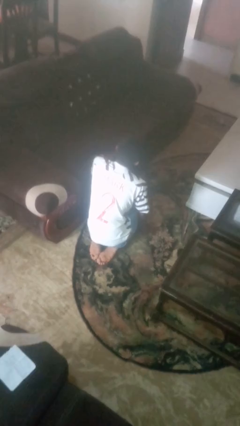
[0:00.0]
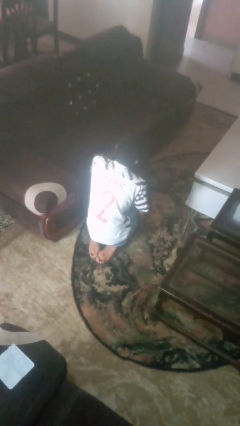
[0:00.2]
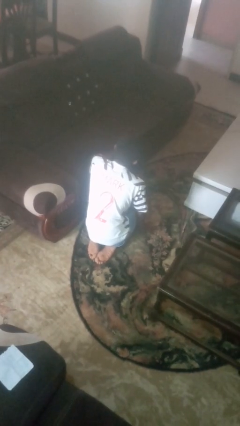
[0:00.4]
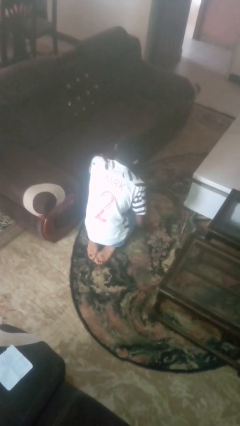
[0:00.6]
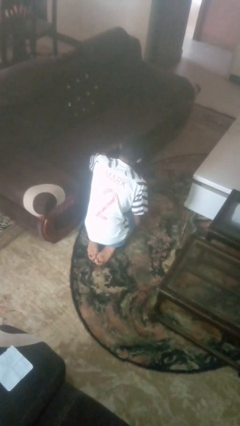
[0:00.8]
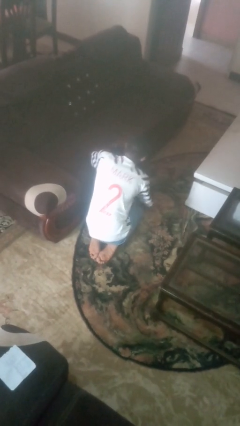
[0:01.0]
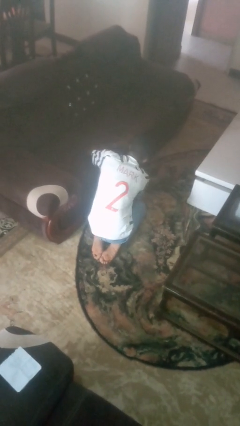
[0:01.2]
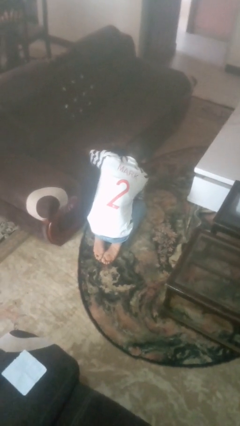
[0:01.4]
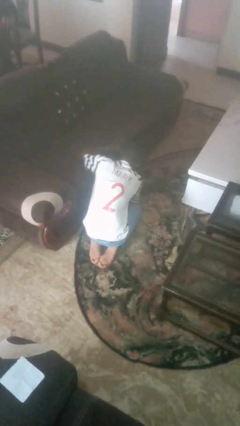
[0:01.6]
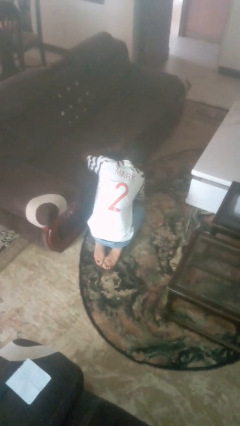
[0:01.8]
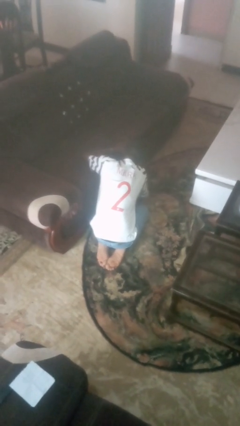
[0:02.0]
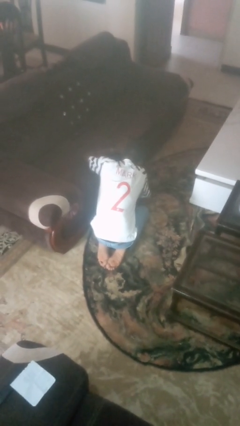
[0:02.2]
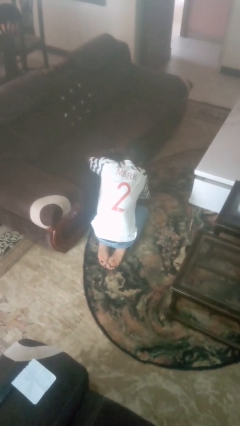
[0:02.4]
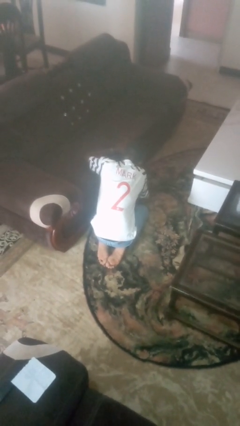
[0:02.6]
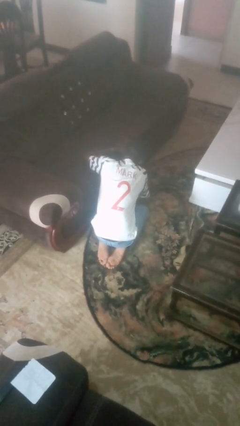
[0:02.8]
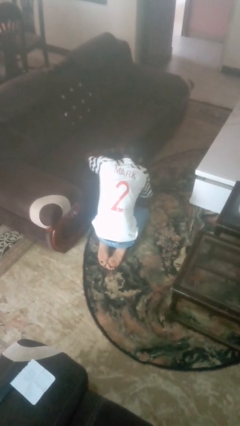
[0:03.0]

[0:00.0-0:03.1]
person searches under couch

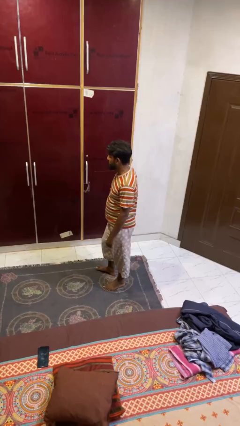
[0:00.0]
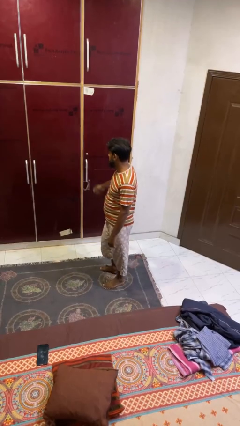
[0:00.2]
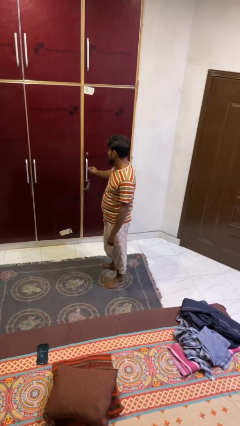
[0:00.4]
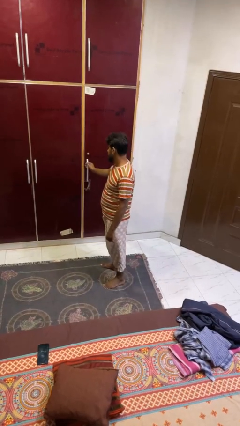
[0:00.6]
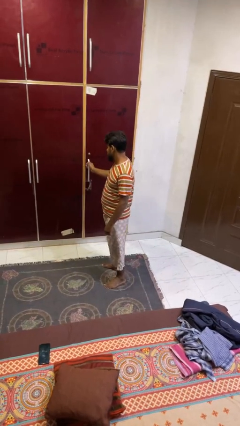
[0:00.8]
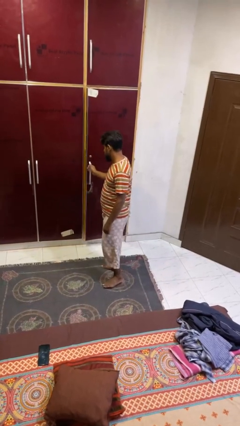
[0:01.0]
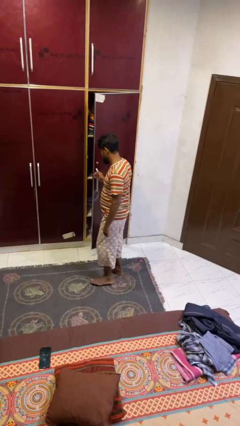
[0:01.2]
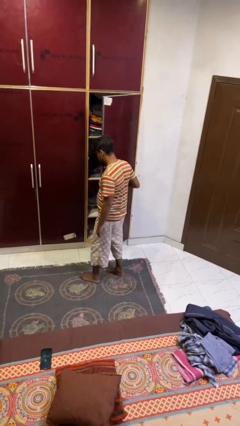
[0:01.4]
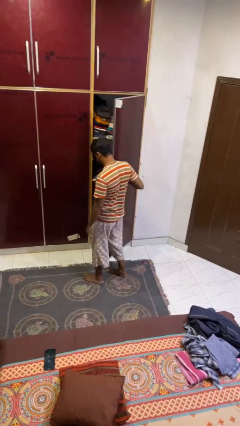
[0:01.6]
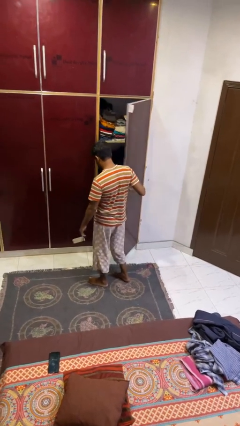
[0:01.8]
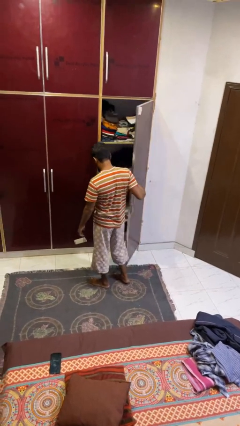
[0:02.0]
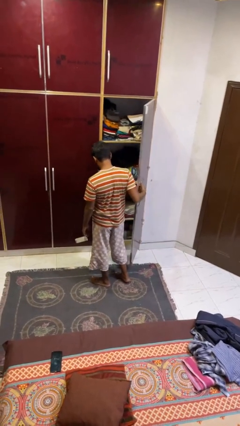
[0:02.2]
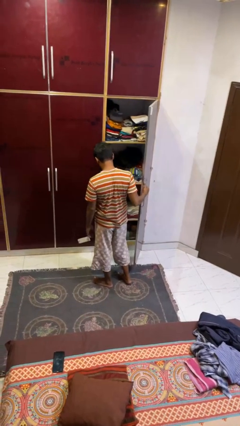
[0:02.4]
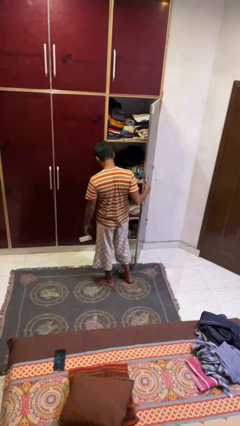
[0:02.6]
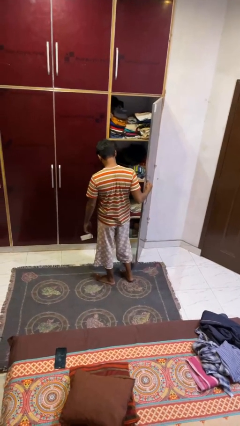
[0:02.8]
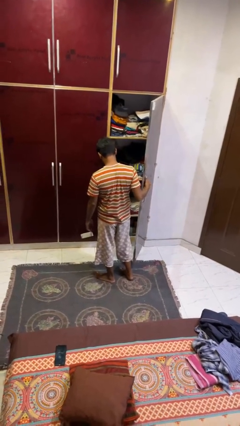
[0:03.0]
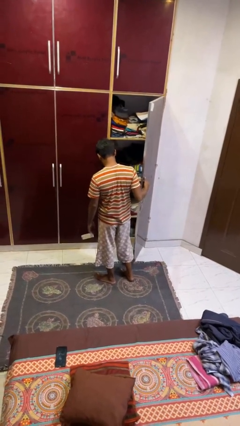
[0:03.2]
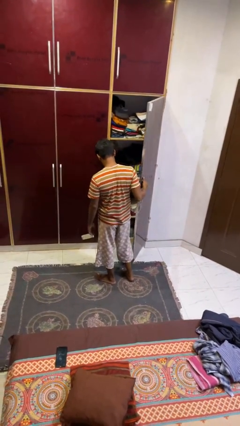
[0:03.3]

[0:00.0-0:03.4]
person opens closet door

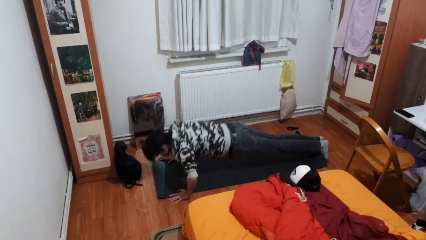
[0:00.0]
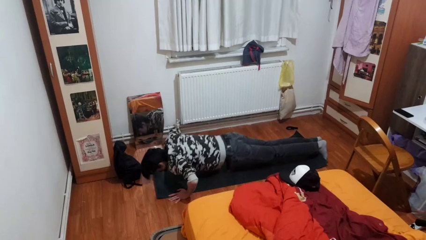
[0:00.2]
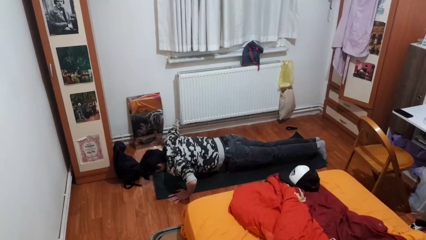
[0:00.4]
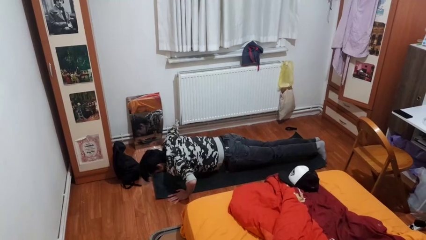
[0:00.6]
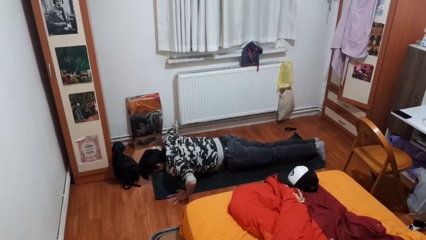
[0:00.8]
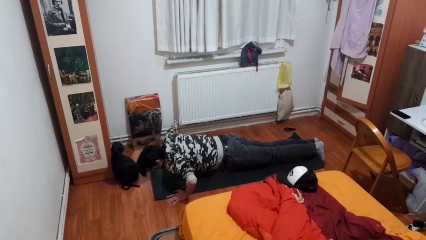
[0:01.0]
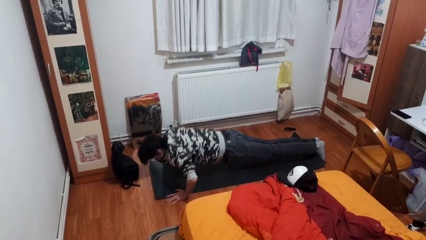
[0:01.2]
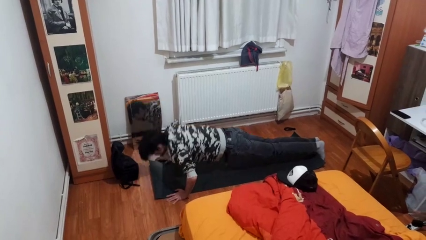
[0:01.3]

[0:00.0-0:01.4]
person exercises with pushup

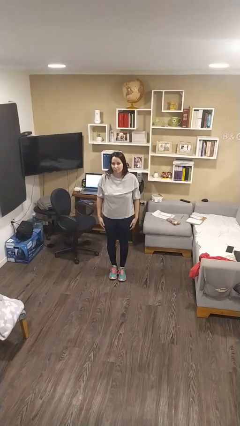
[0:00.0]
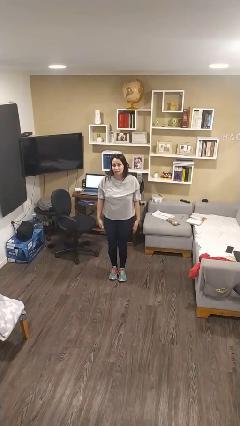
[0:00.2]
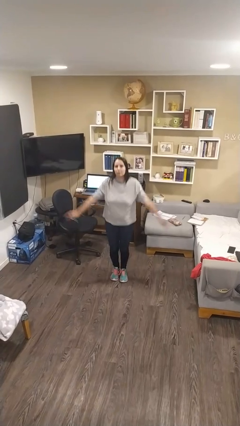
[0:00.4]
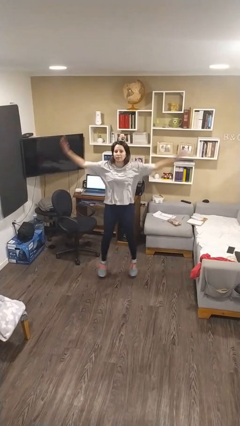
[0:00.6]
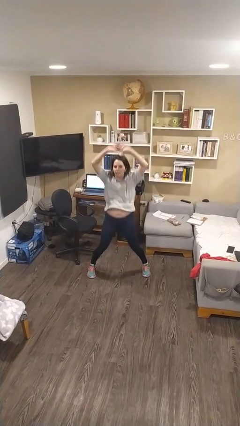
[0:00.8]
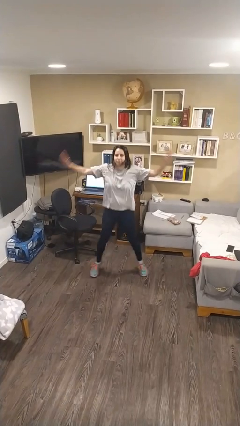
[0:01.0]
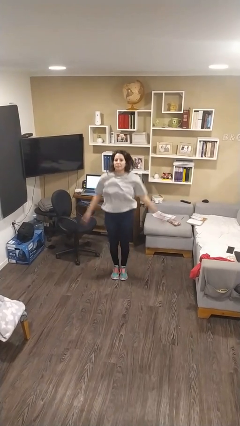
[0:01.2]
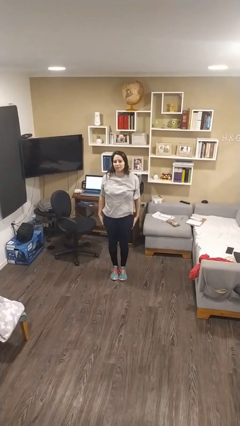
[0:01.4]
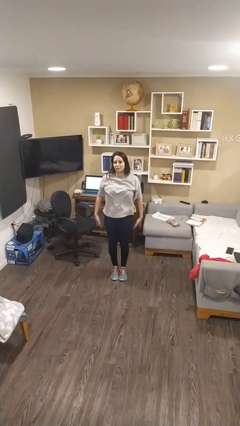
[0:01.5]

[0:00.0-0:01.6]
person exercises with jumping jacks

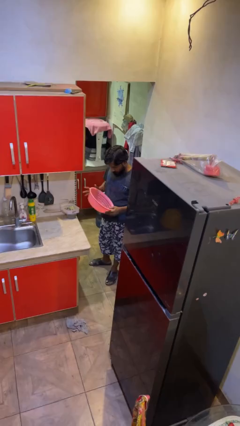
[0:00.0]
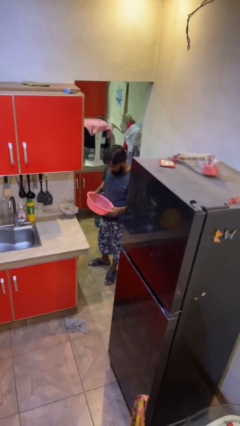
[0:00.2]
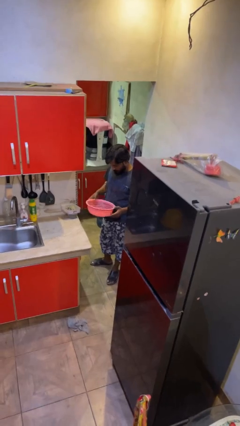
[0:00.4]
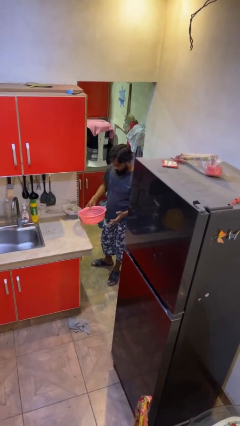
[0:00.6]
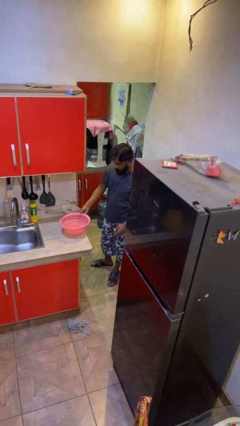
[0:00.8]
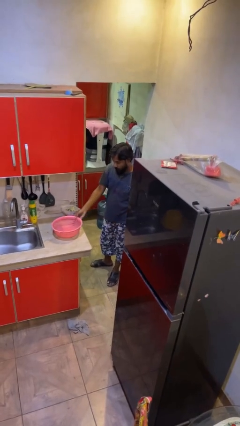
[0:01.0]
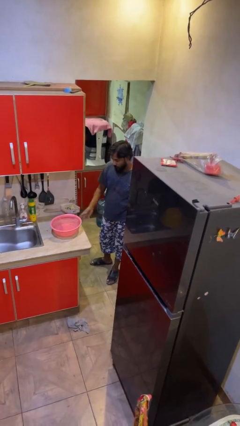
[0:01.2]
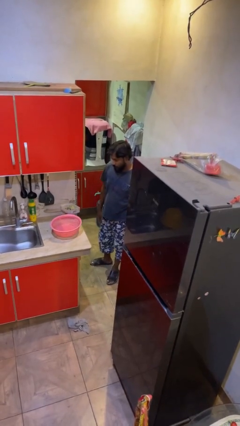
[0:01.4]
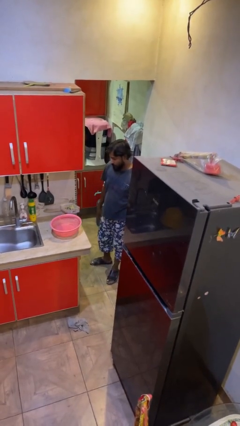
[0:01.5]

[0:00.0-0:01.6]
person puts down object on countertop

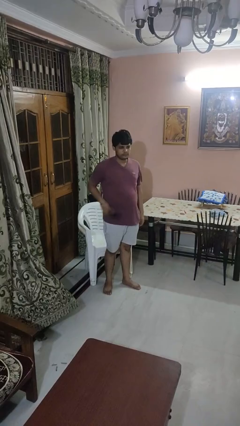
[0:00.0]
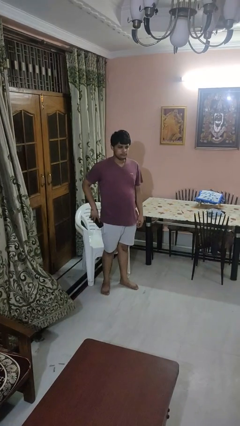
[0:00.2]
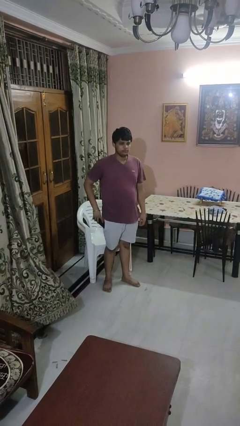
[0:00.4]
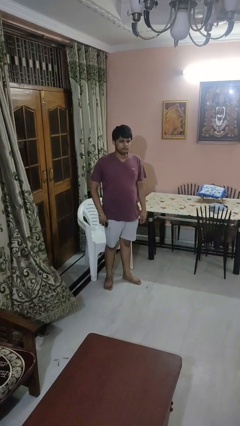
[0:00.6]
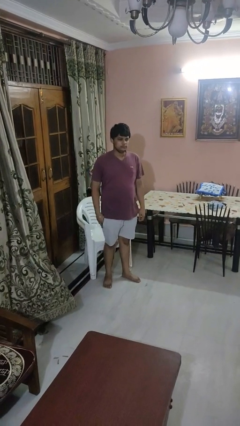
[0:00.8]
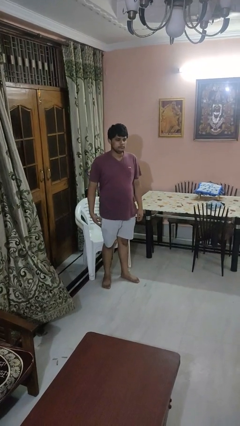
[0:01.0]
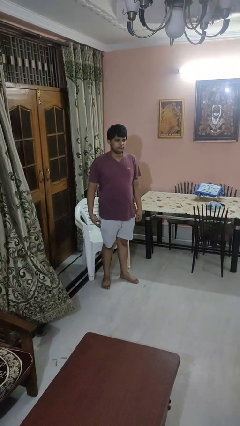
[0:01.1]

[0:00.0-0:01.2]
person puts phone into pocket

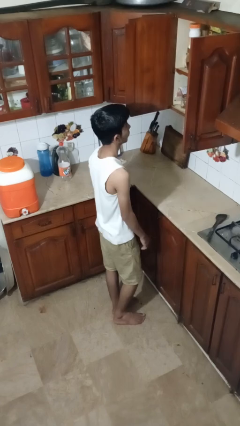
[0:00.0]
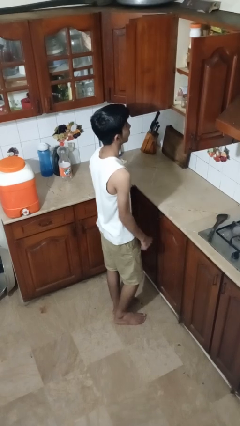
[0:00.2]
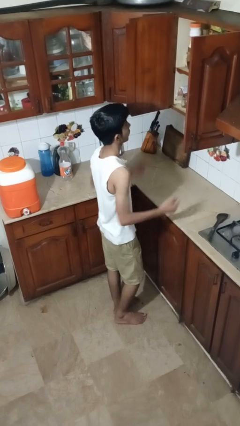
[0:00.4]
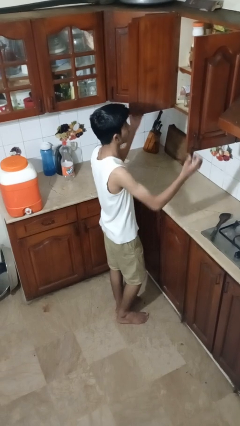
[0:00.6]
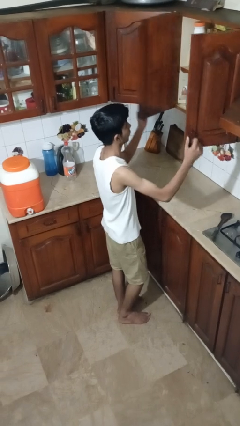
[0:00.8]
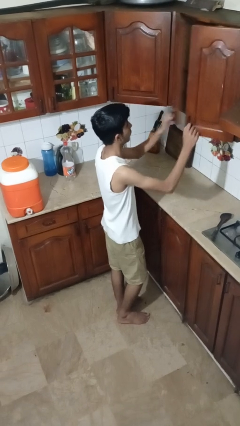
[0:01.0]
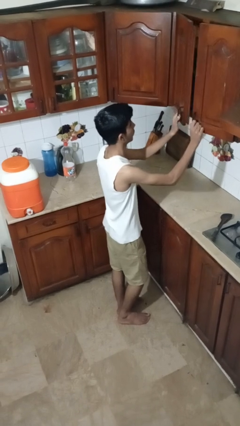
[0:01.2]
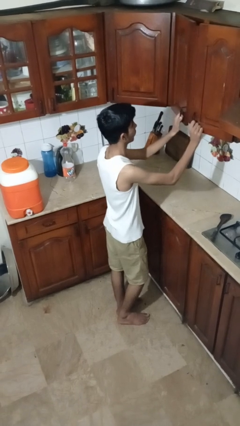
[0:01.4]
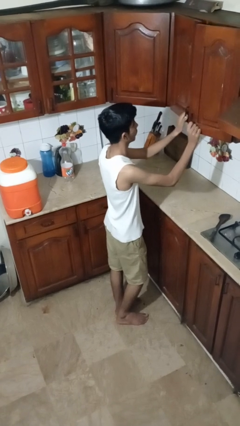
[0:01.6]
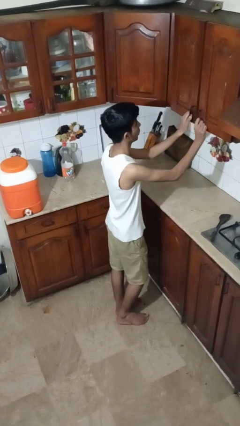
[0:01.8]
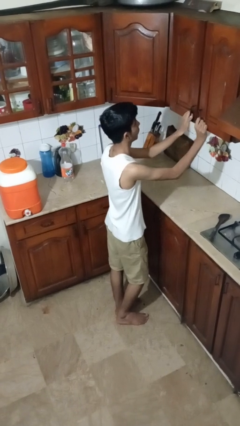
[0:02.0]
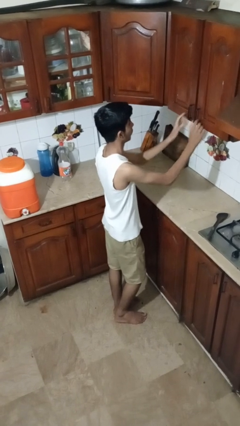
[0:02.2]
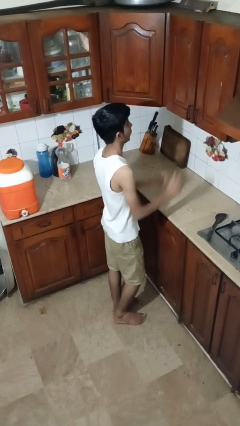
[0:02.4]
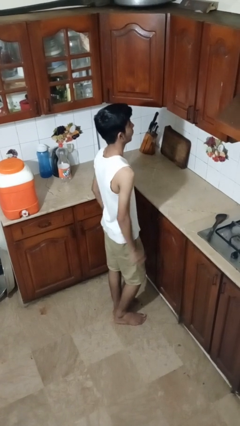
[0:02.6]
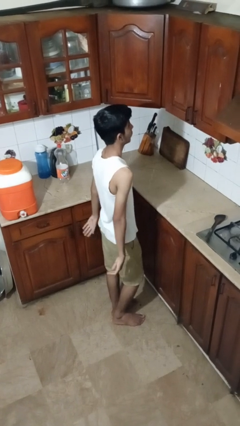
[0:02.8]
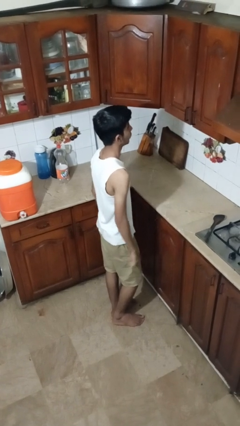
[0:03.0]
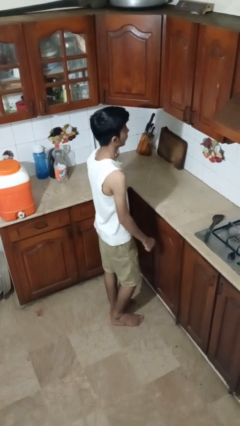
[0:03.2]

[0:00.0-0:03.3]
person closes cabinet

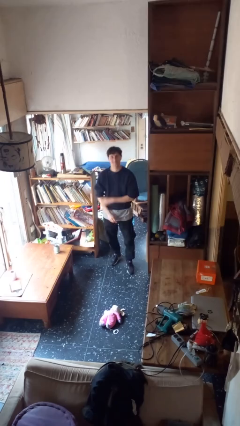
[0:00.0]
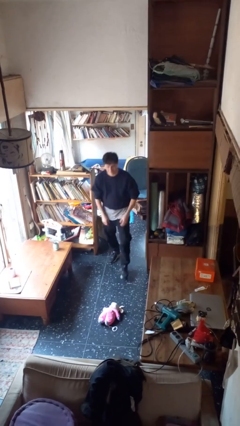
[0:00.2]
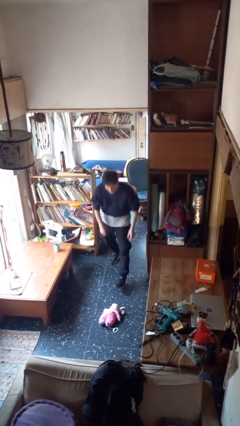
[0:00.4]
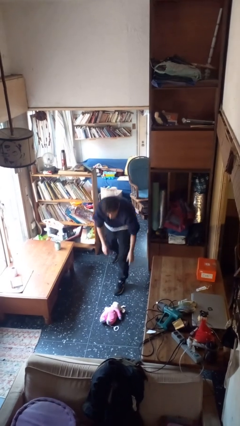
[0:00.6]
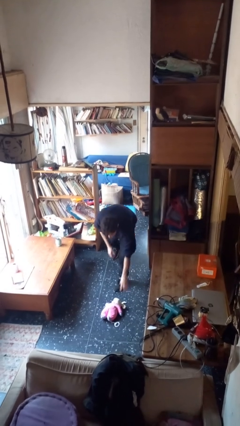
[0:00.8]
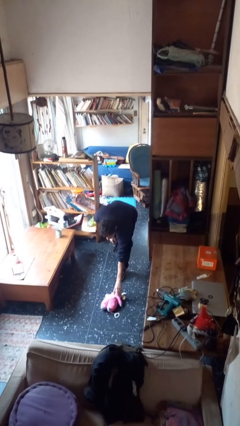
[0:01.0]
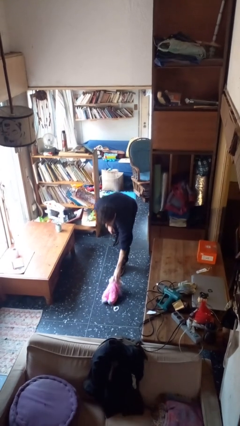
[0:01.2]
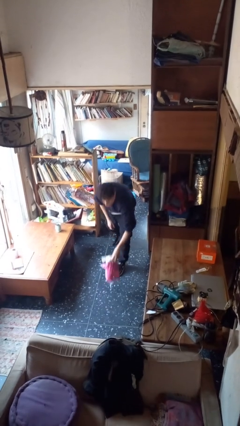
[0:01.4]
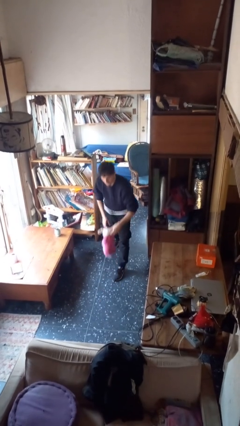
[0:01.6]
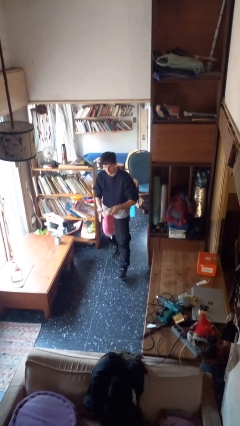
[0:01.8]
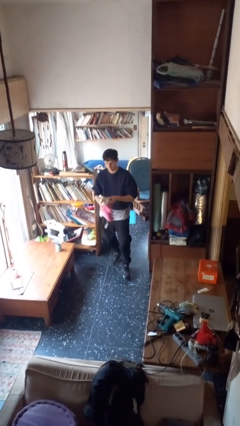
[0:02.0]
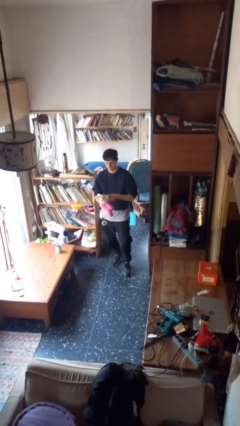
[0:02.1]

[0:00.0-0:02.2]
person picks up object from floor
